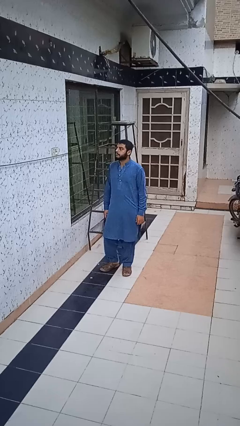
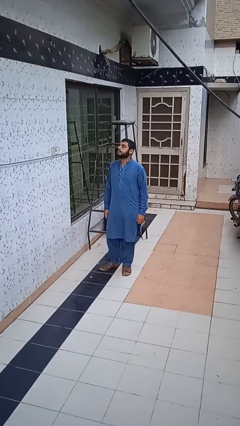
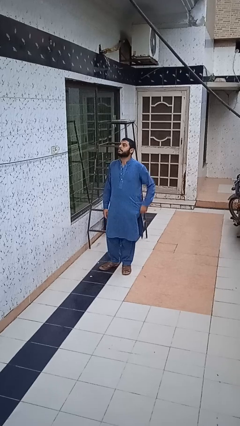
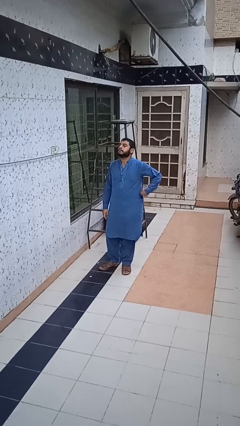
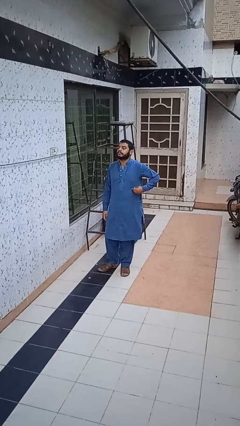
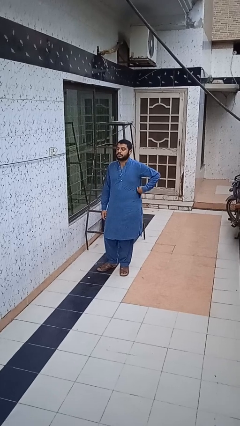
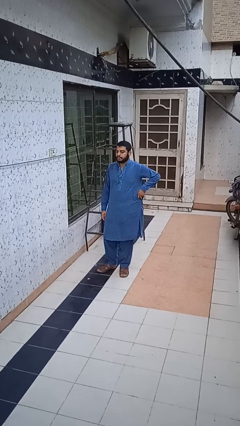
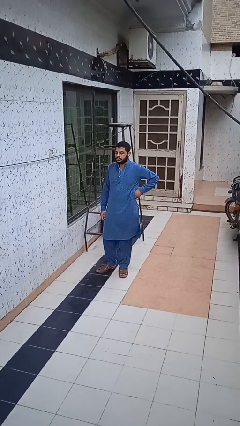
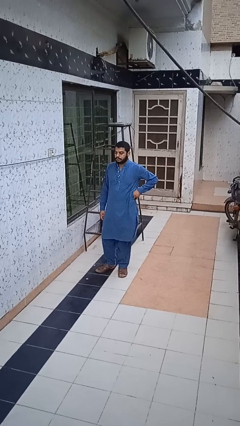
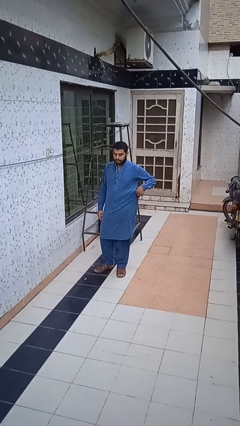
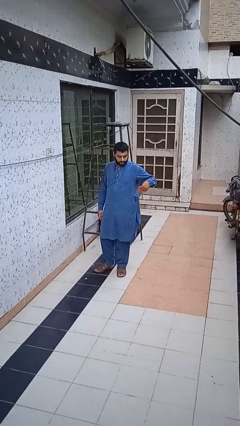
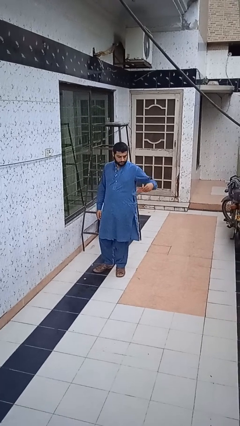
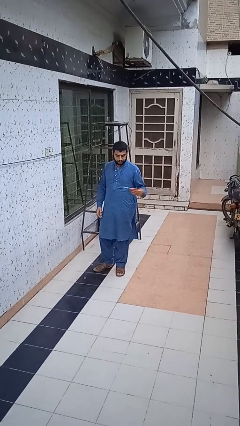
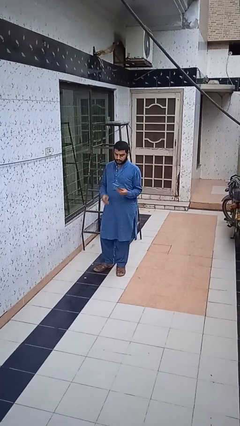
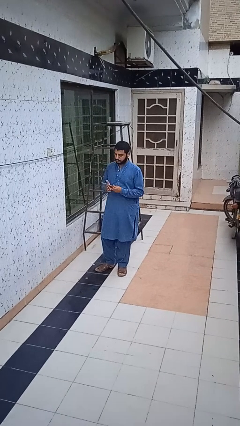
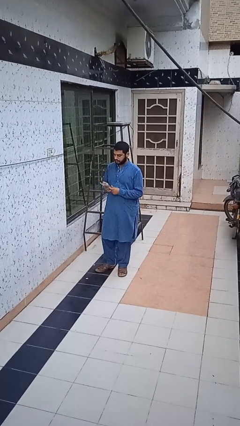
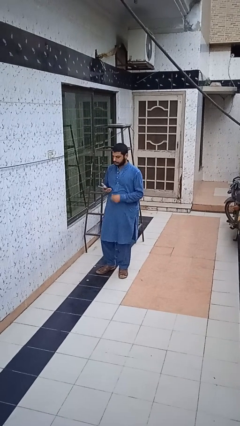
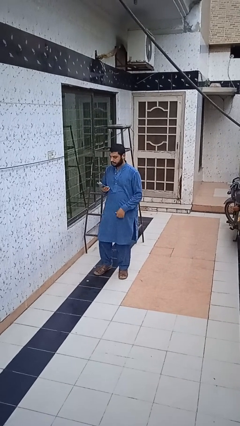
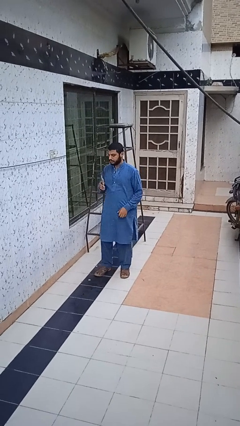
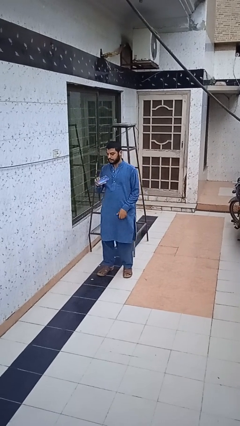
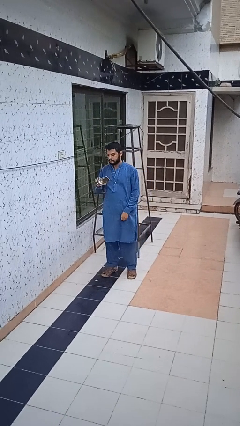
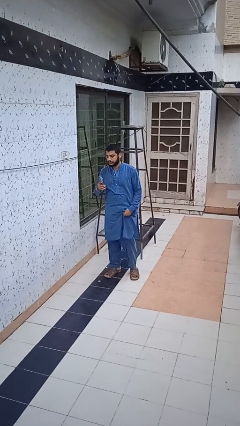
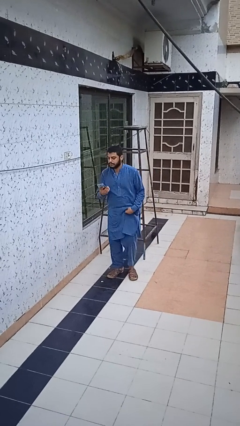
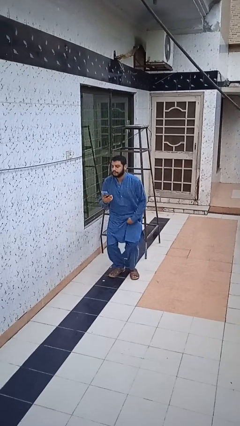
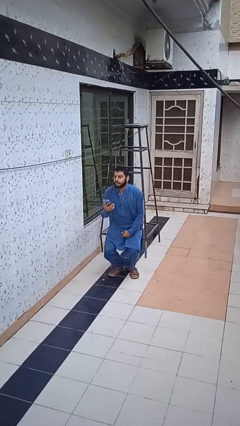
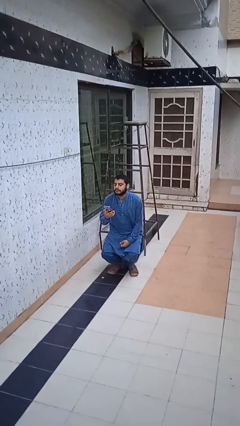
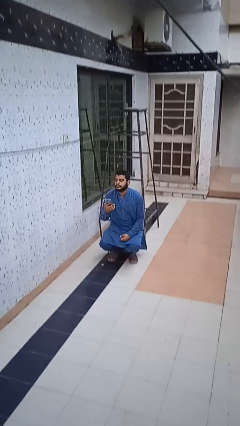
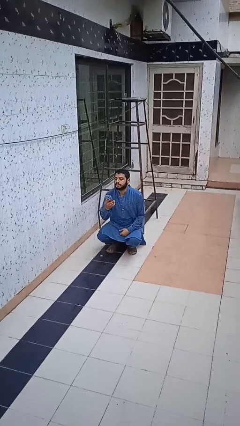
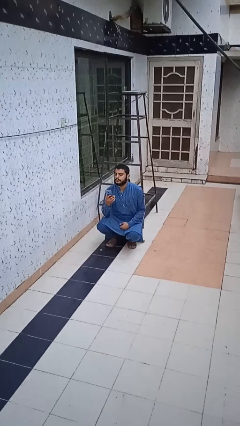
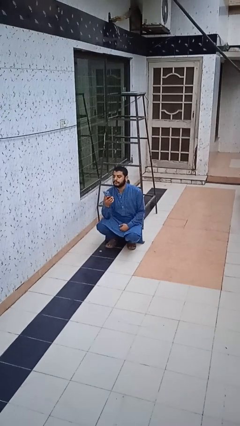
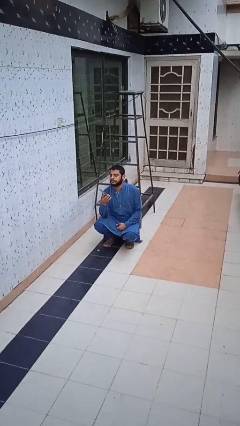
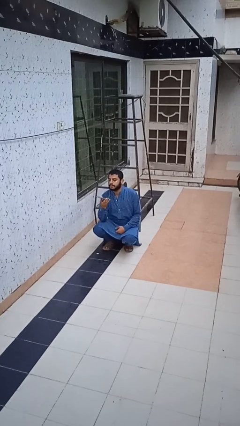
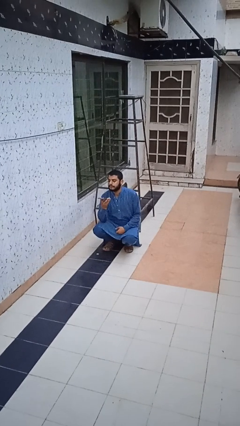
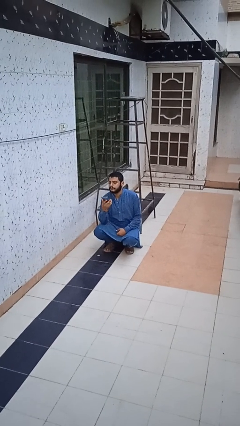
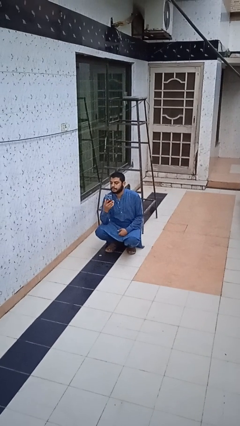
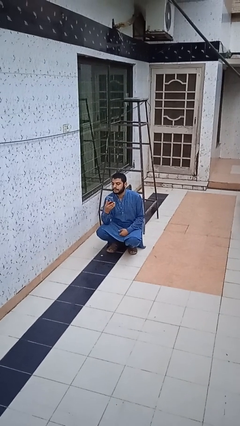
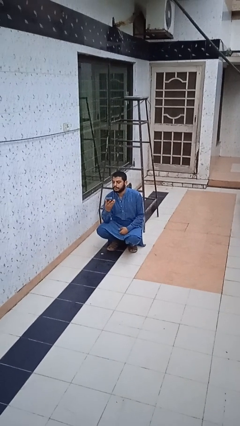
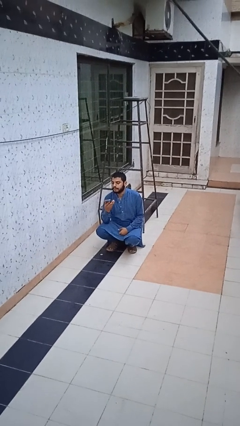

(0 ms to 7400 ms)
person takes phone from pocket

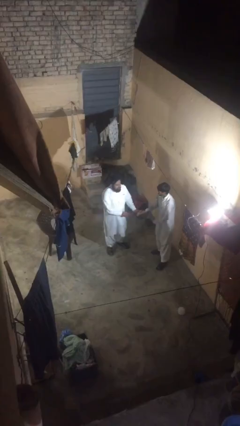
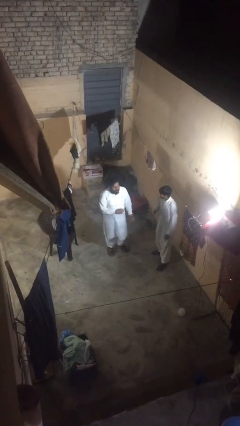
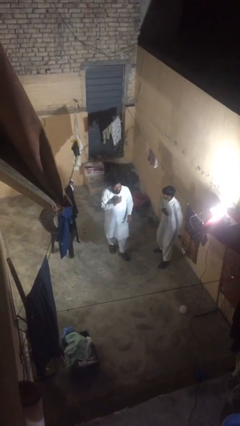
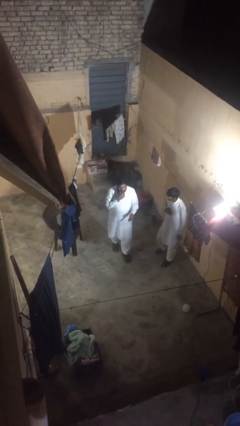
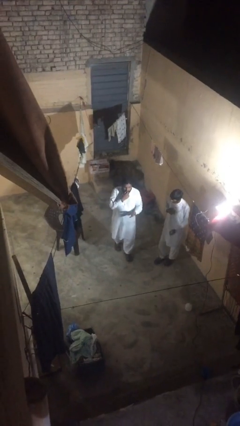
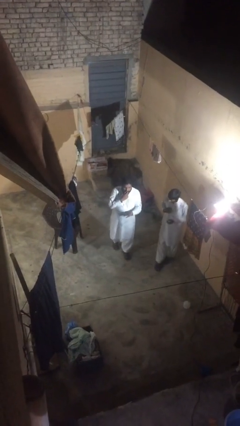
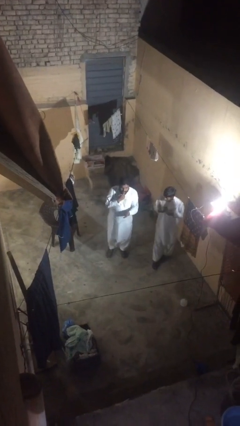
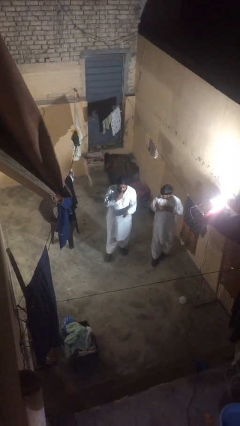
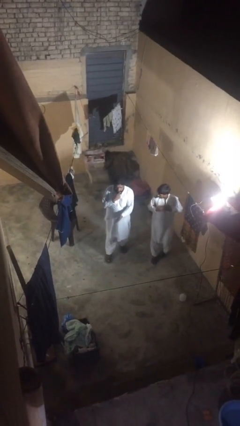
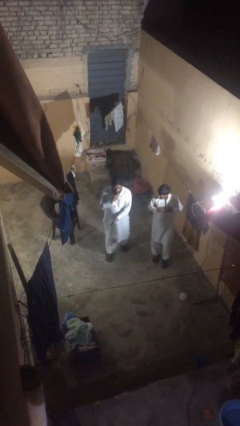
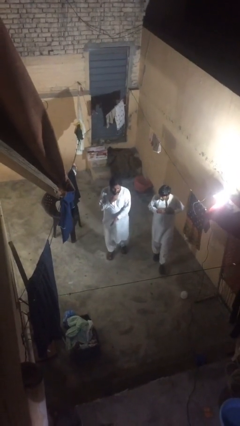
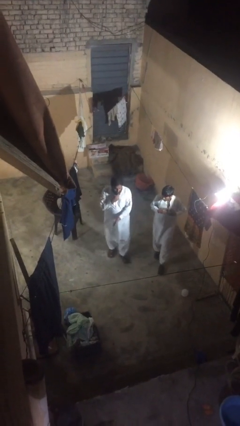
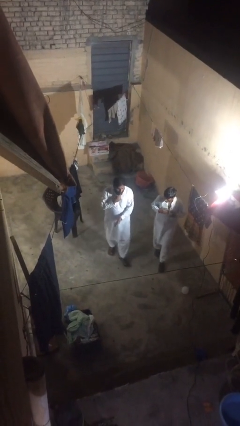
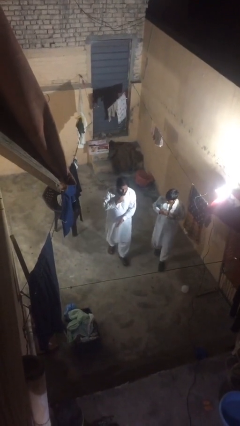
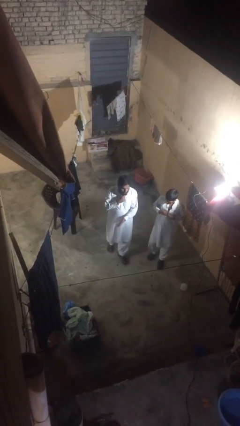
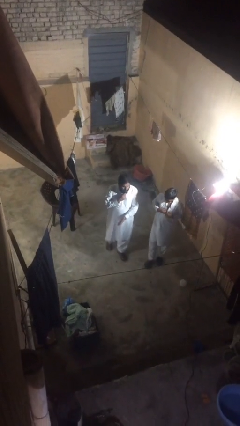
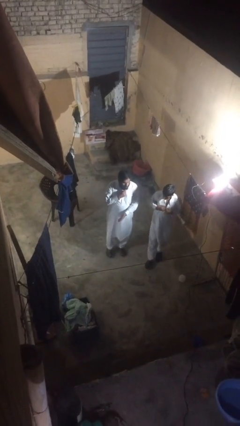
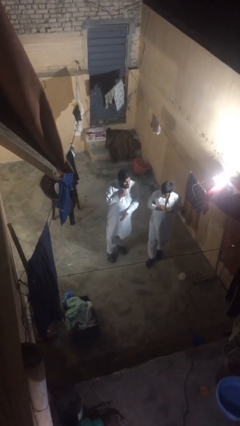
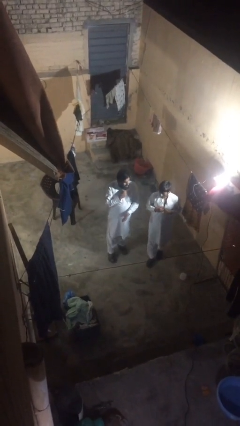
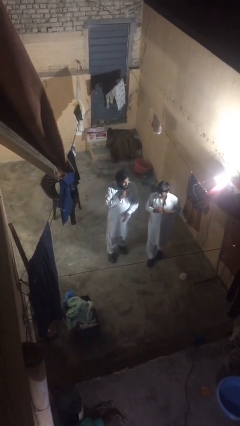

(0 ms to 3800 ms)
person talks to person

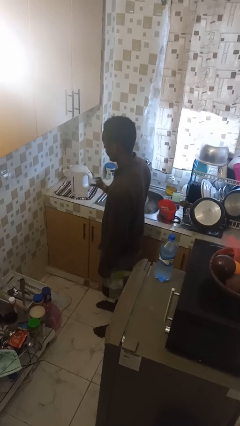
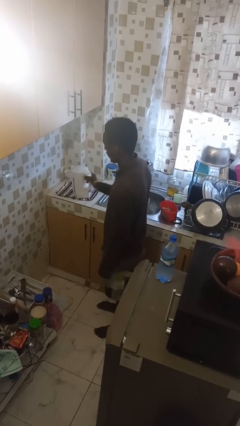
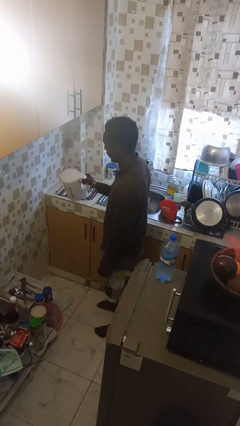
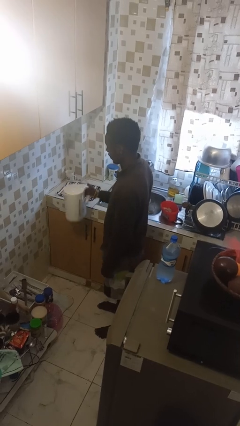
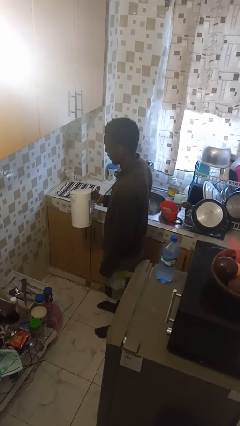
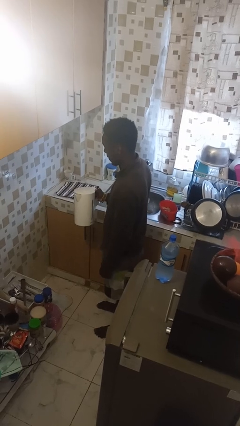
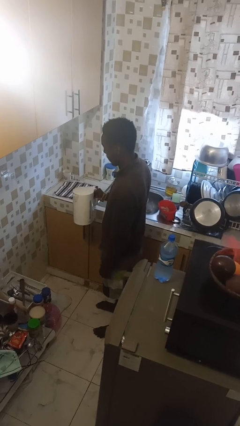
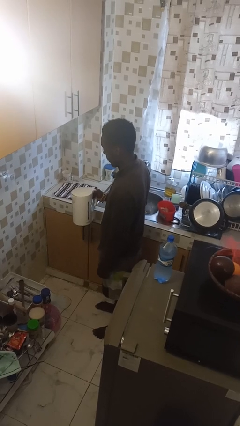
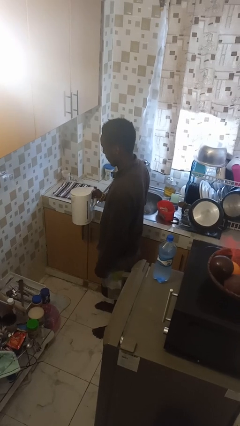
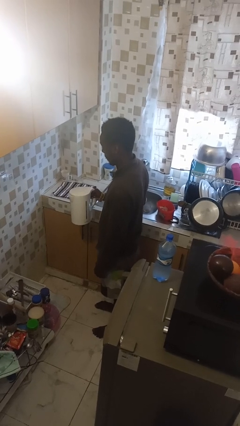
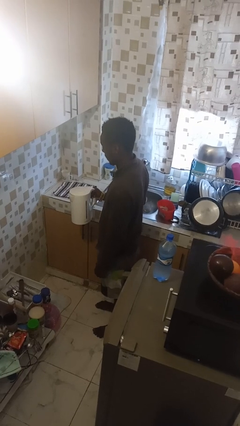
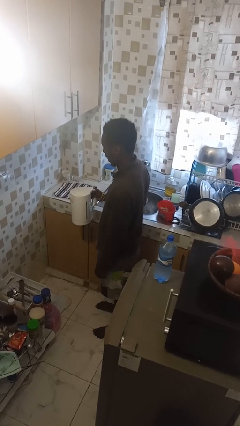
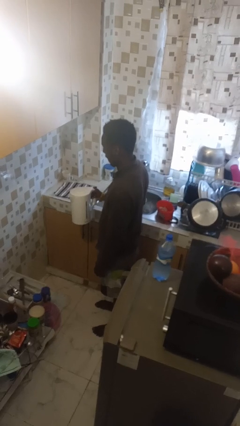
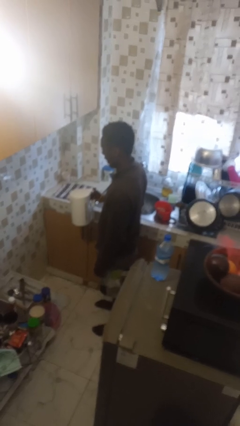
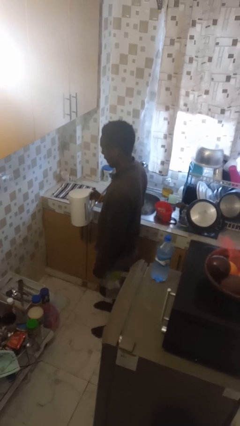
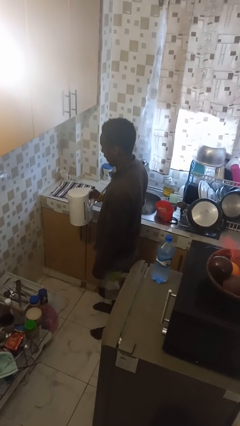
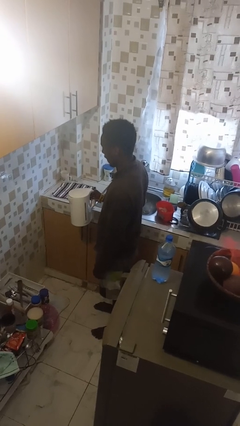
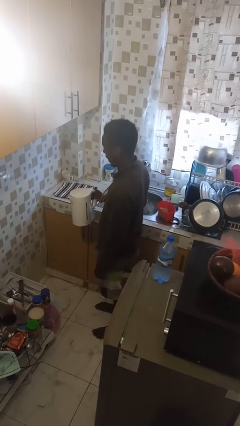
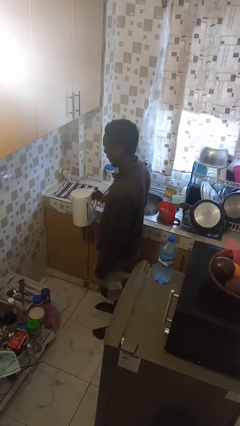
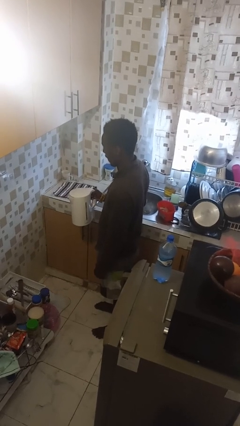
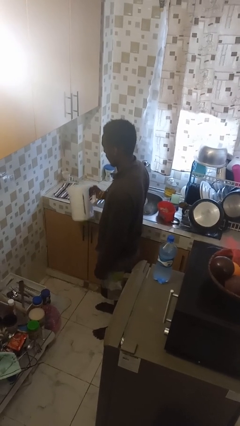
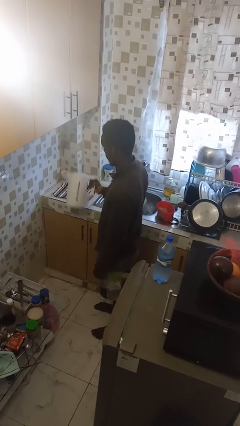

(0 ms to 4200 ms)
person picks up object from countertop

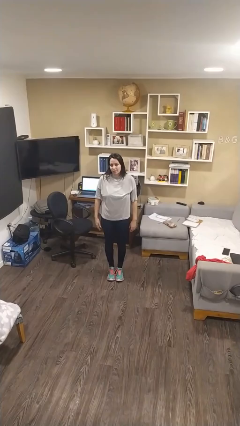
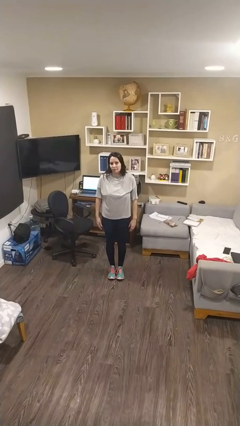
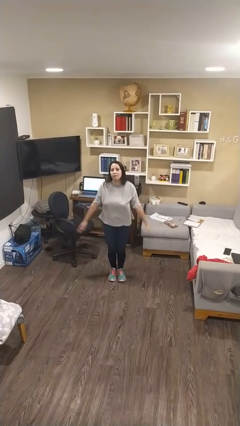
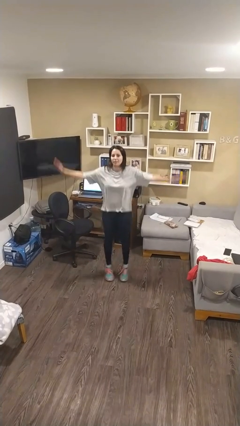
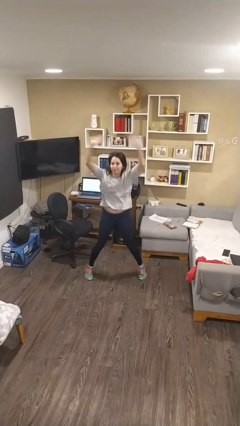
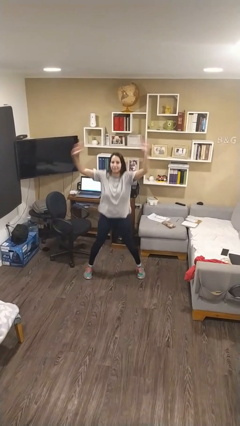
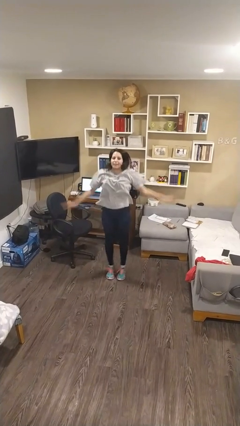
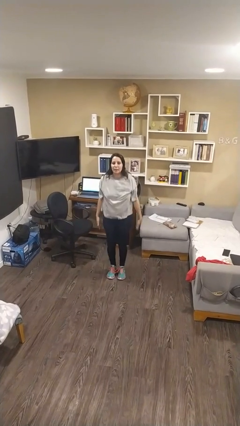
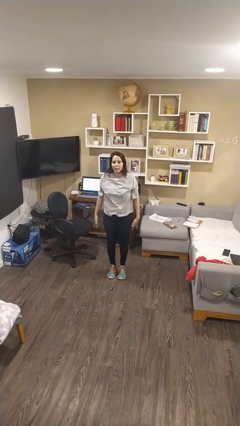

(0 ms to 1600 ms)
person exercises with jumping jacks

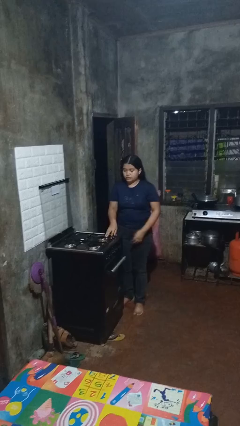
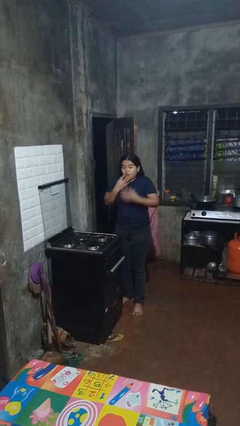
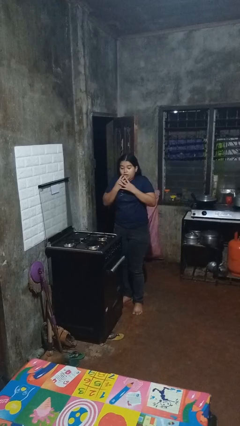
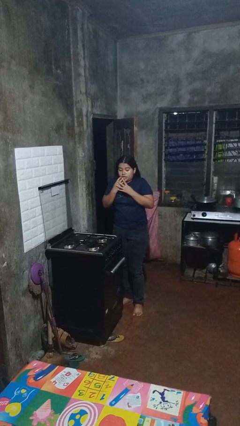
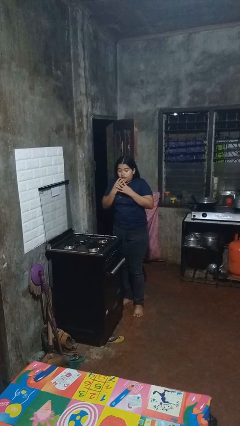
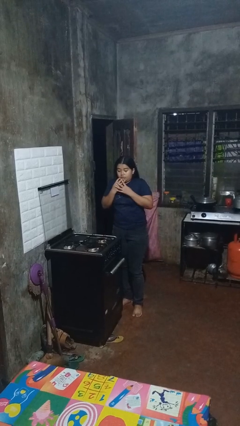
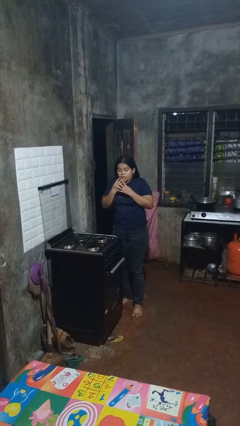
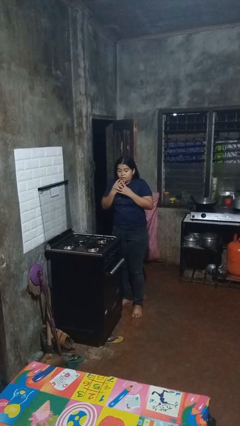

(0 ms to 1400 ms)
person burns hand
